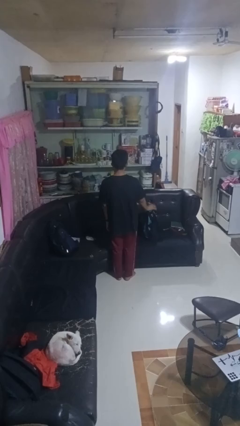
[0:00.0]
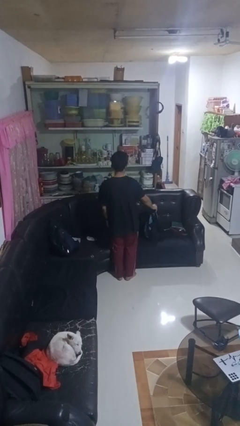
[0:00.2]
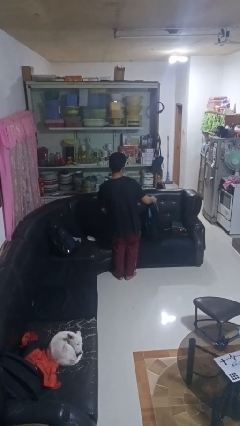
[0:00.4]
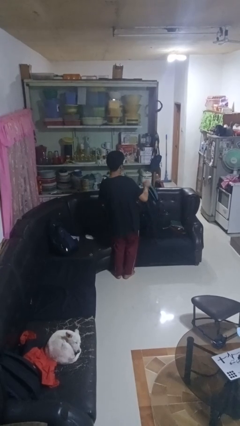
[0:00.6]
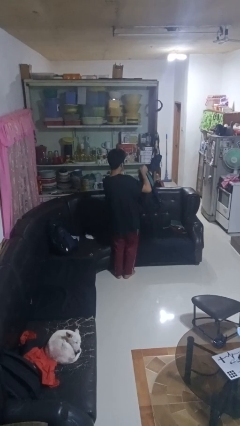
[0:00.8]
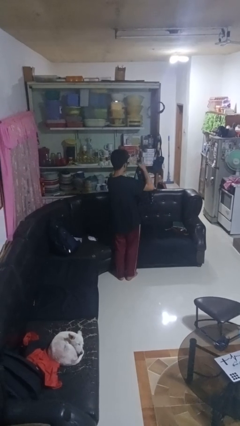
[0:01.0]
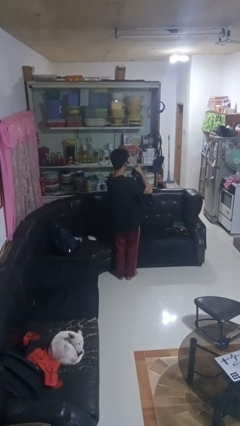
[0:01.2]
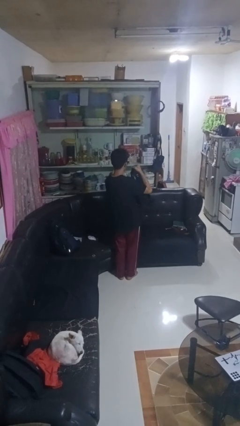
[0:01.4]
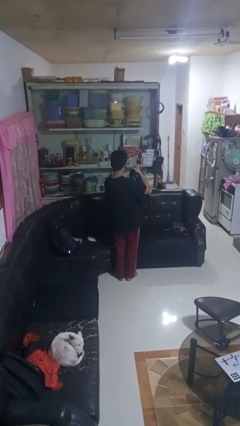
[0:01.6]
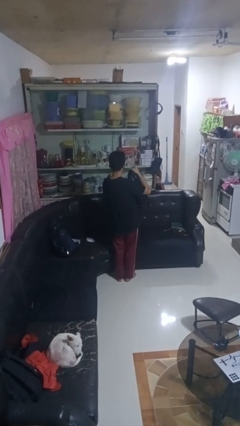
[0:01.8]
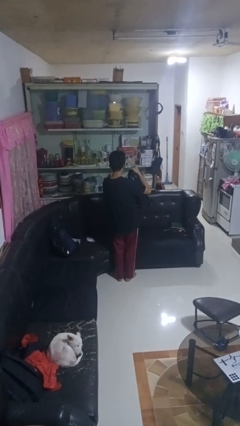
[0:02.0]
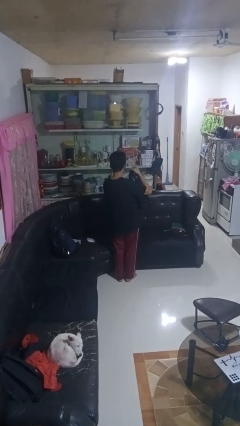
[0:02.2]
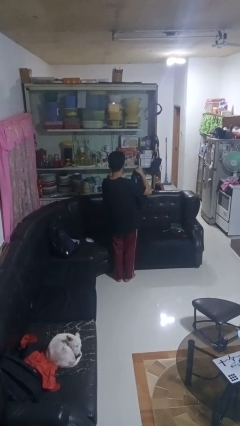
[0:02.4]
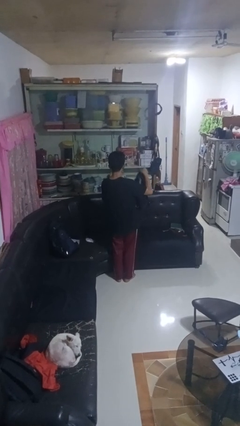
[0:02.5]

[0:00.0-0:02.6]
person picks up object from couch

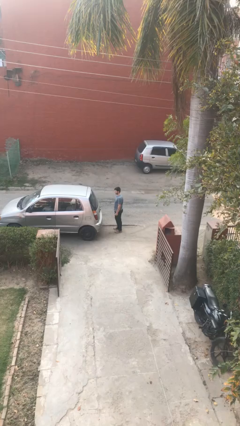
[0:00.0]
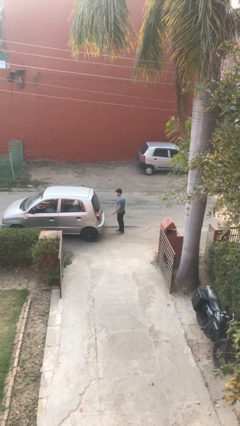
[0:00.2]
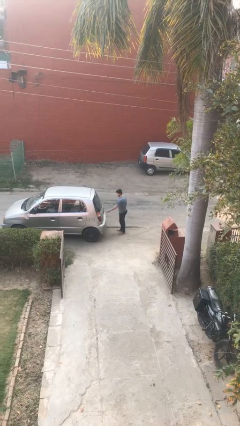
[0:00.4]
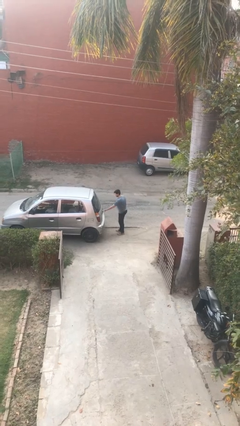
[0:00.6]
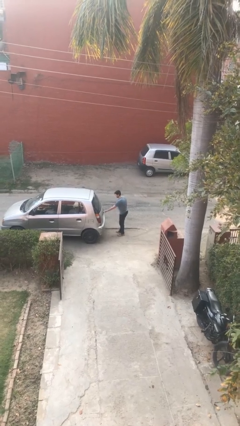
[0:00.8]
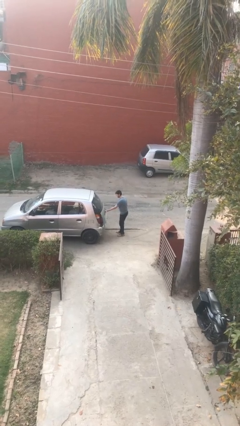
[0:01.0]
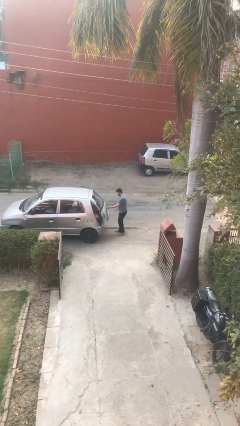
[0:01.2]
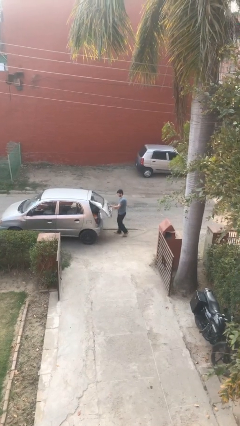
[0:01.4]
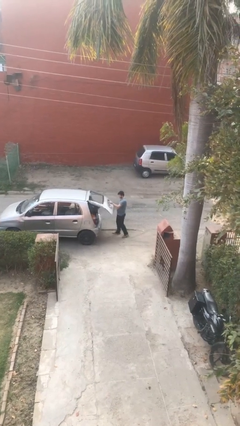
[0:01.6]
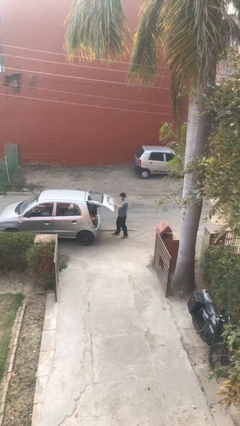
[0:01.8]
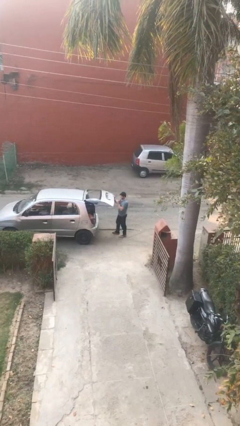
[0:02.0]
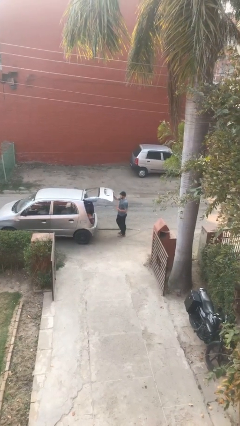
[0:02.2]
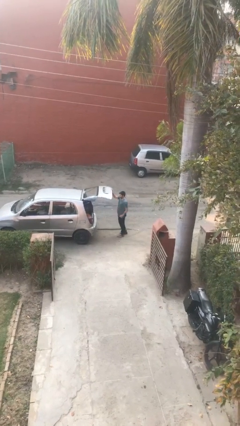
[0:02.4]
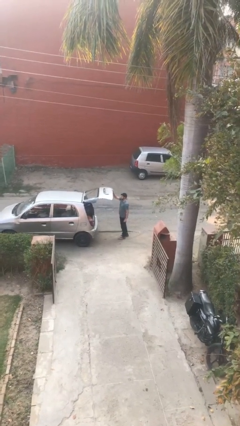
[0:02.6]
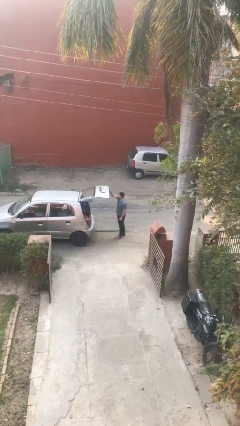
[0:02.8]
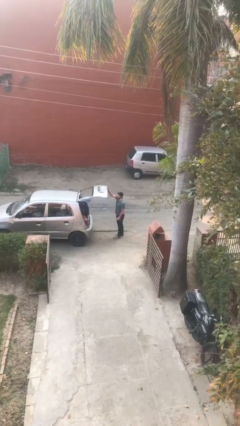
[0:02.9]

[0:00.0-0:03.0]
person opens car trunk

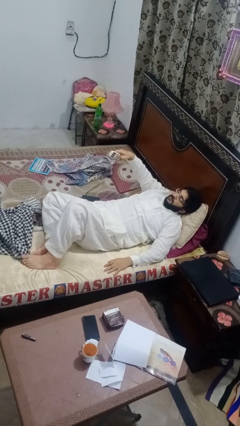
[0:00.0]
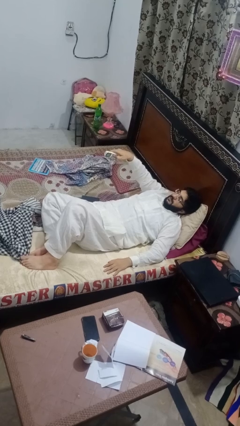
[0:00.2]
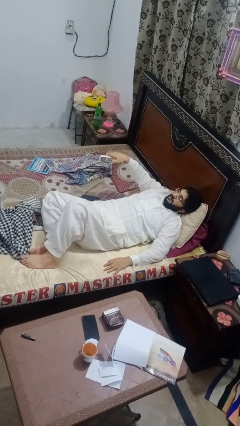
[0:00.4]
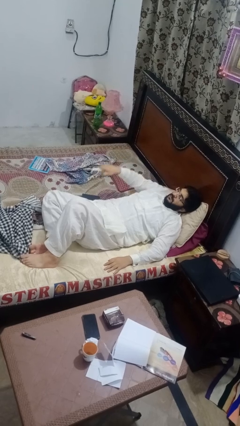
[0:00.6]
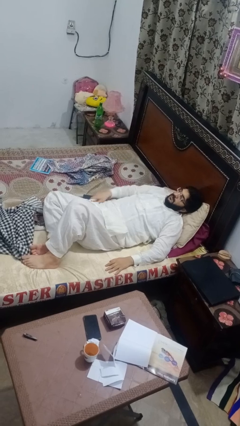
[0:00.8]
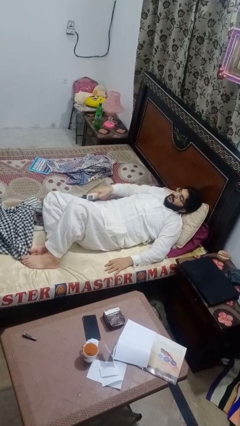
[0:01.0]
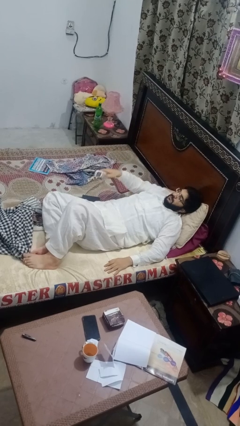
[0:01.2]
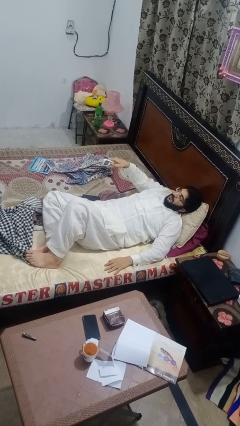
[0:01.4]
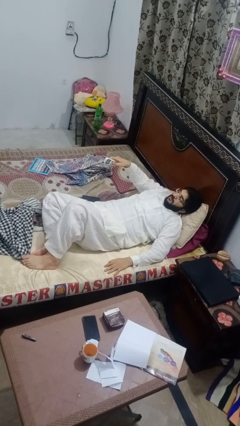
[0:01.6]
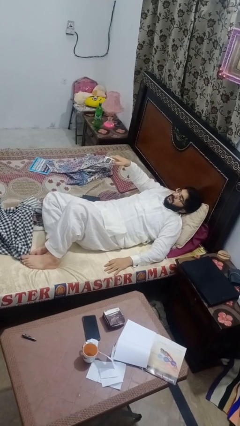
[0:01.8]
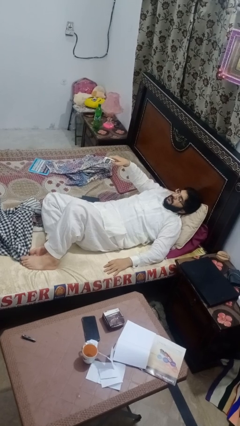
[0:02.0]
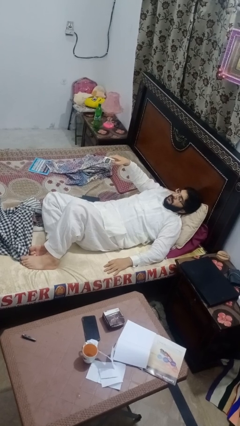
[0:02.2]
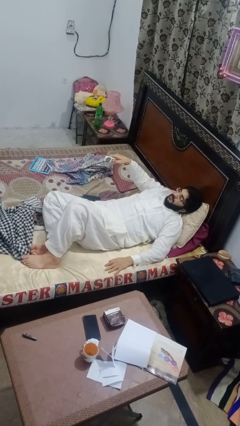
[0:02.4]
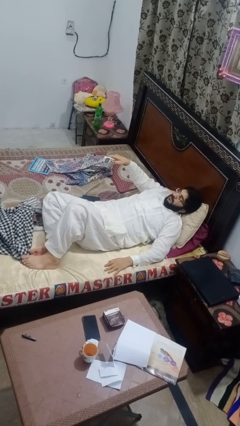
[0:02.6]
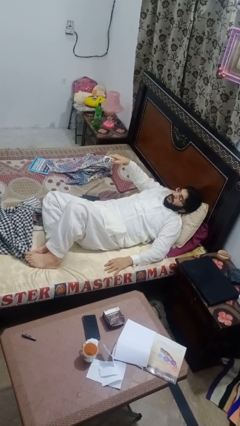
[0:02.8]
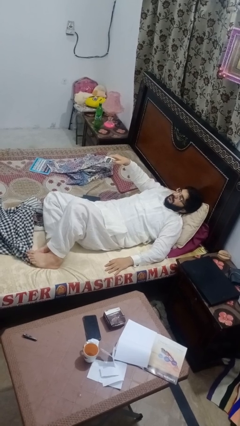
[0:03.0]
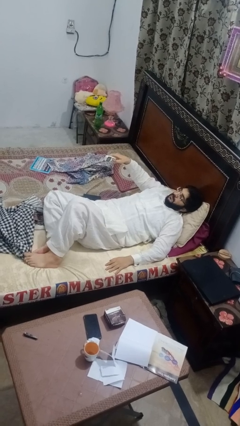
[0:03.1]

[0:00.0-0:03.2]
person uses television remote

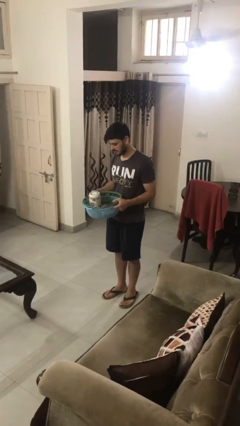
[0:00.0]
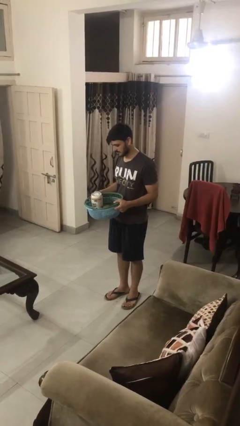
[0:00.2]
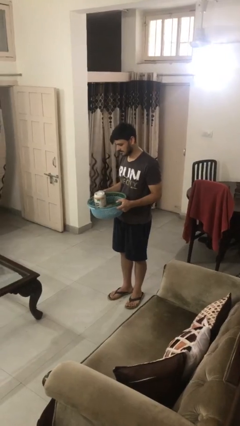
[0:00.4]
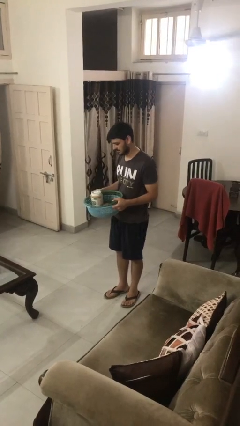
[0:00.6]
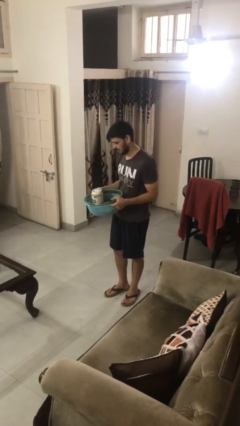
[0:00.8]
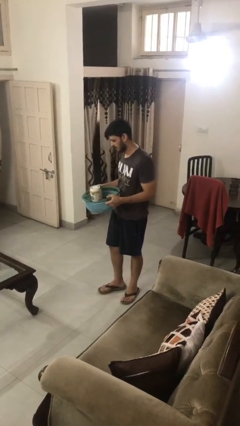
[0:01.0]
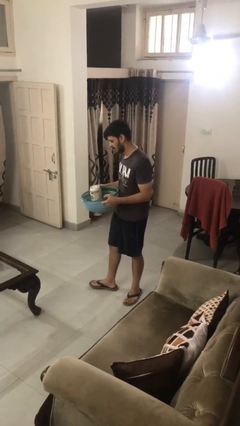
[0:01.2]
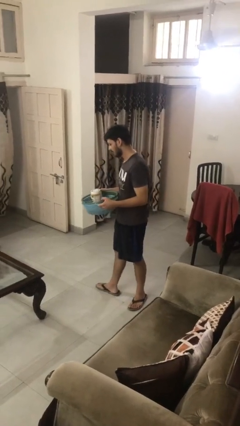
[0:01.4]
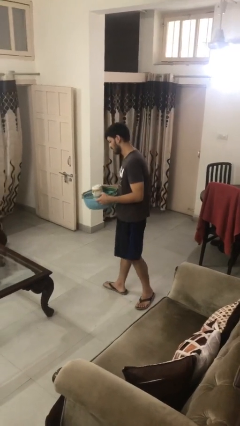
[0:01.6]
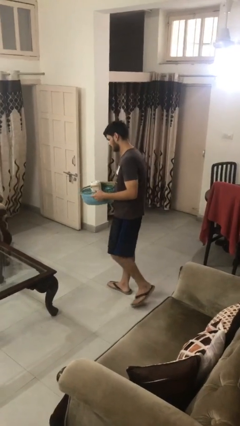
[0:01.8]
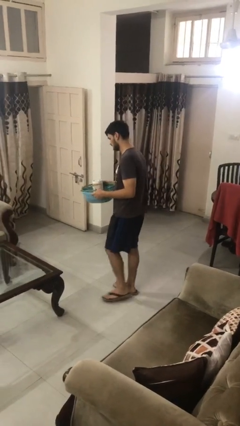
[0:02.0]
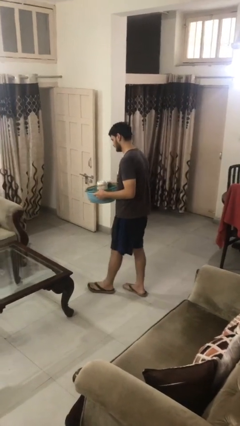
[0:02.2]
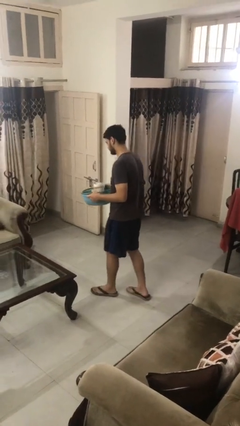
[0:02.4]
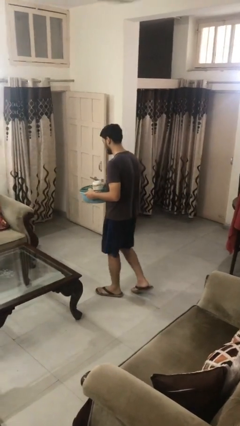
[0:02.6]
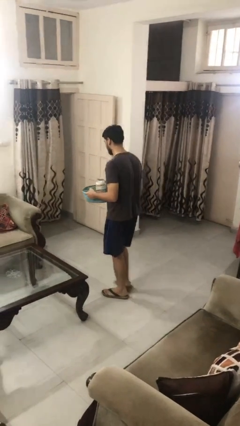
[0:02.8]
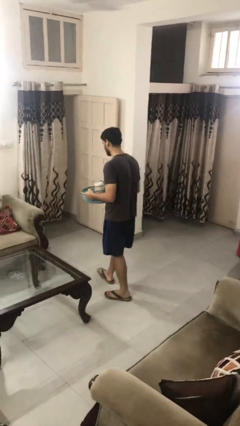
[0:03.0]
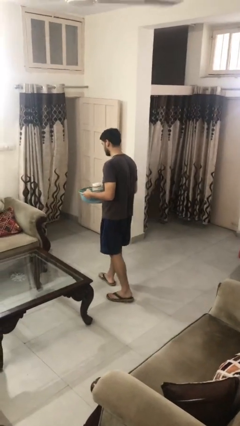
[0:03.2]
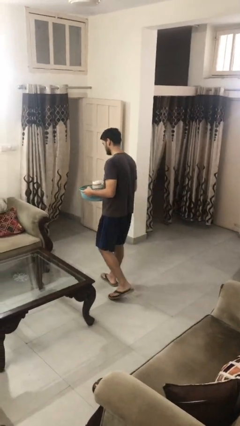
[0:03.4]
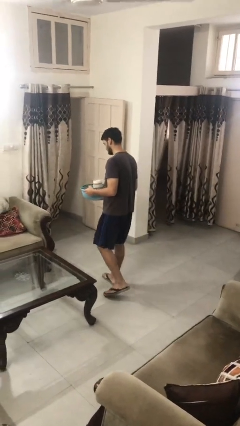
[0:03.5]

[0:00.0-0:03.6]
person carries groceries

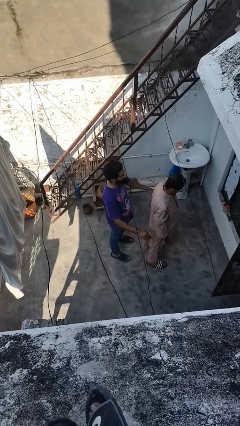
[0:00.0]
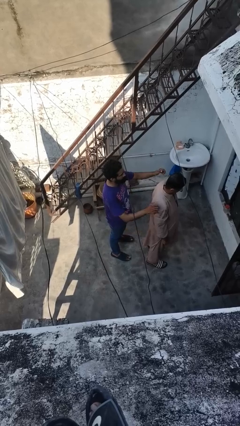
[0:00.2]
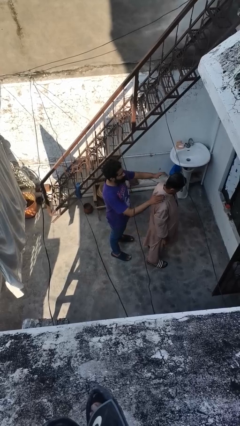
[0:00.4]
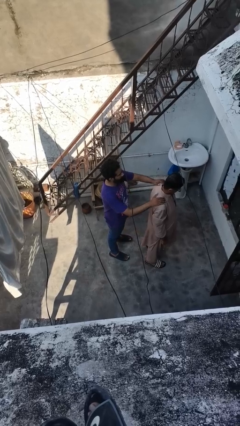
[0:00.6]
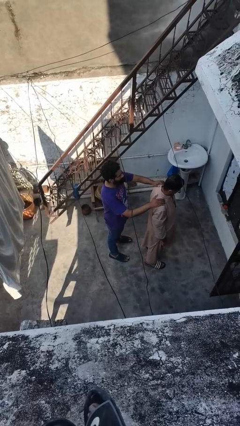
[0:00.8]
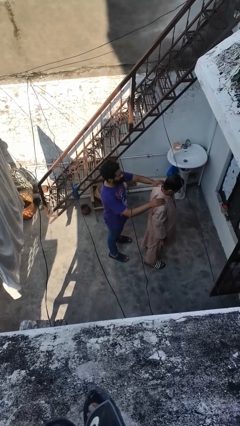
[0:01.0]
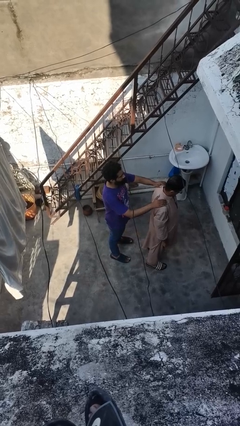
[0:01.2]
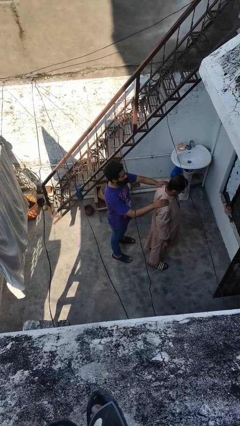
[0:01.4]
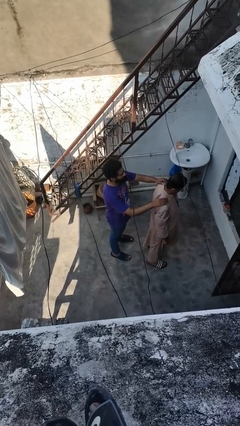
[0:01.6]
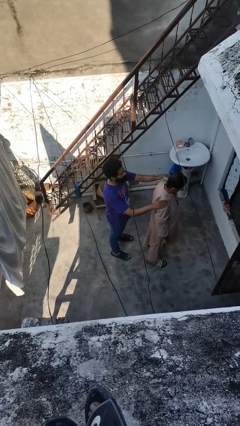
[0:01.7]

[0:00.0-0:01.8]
person touches back of person

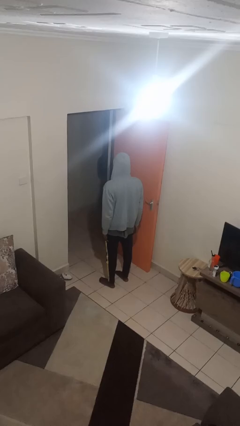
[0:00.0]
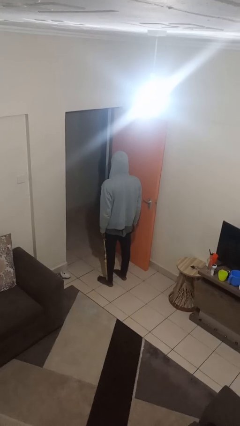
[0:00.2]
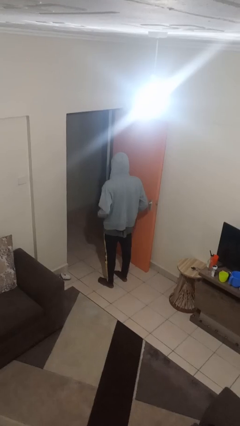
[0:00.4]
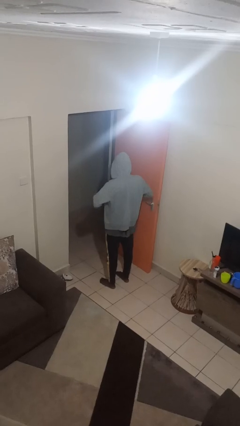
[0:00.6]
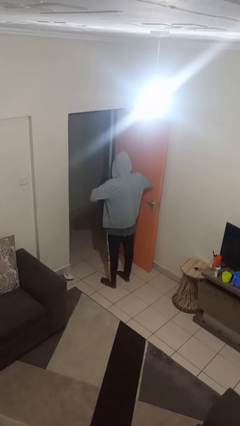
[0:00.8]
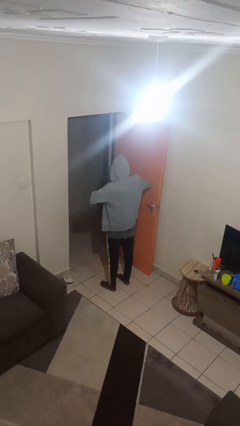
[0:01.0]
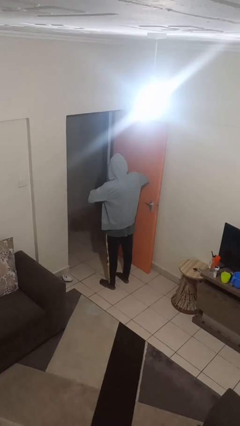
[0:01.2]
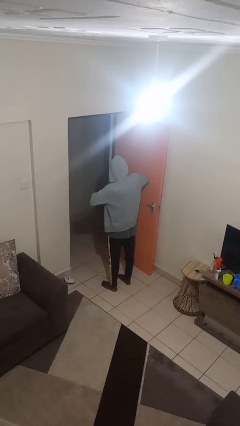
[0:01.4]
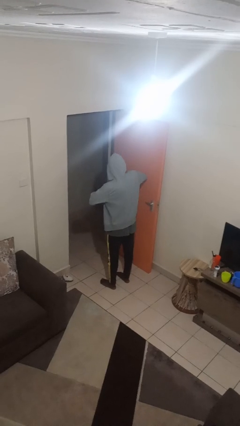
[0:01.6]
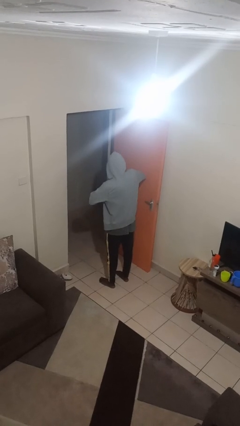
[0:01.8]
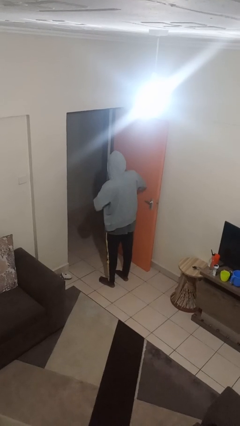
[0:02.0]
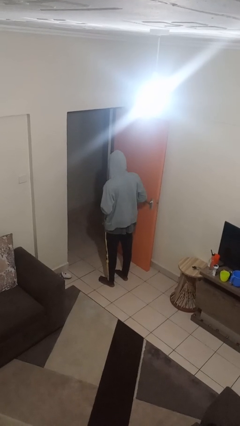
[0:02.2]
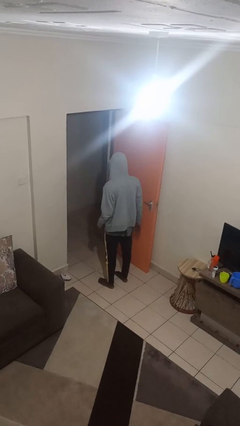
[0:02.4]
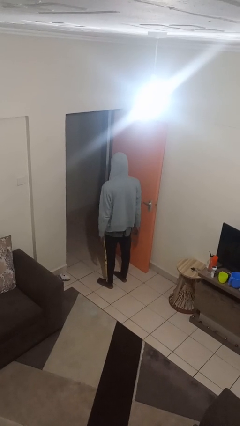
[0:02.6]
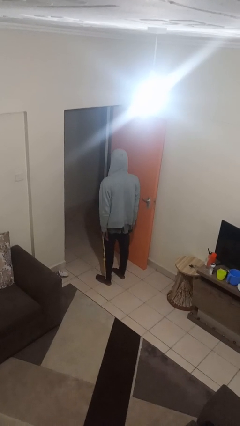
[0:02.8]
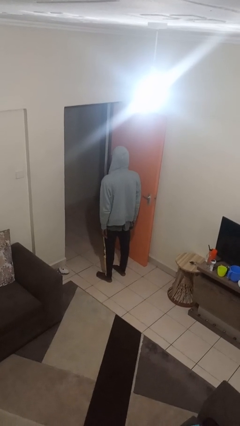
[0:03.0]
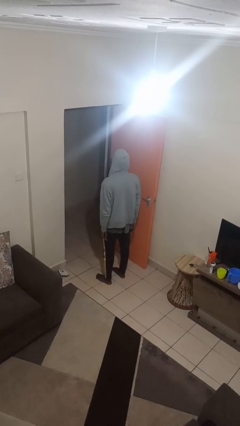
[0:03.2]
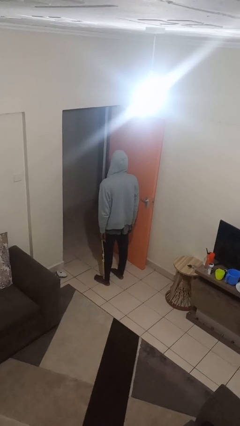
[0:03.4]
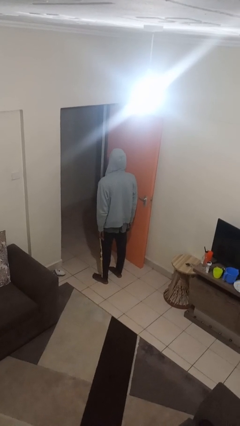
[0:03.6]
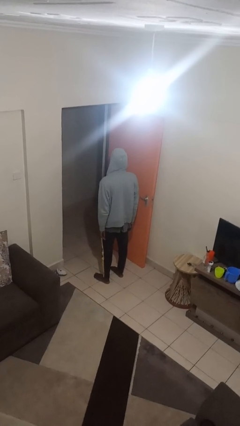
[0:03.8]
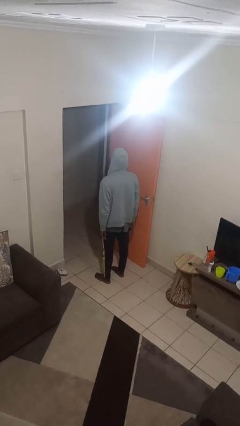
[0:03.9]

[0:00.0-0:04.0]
person puts on ring
